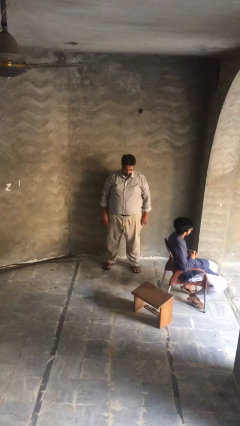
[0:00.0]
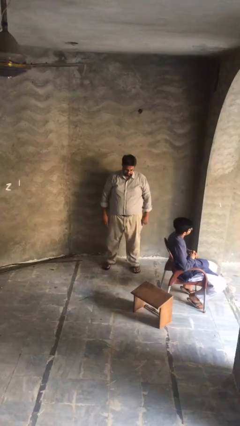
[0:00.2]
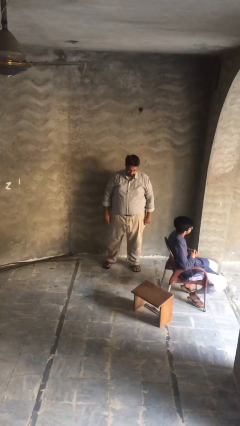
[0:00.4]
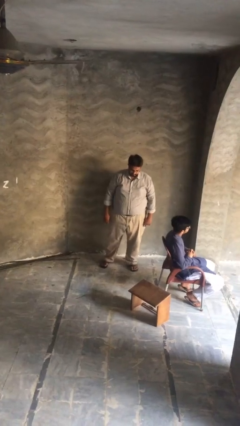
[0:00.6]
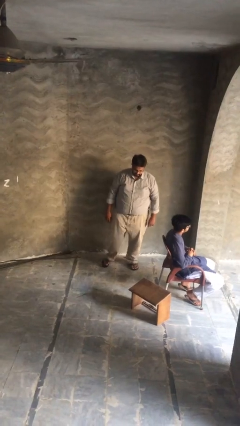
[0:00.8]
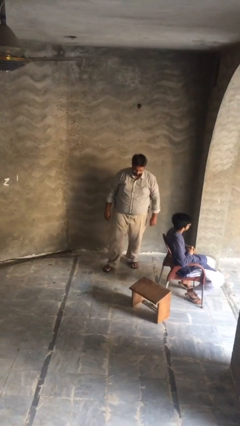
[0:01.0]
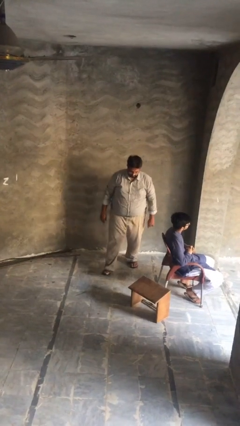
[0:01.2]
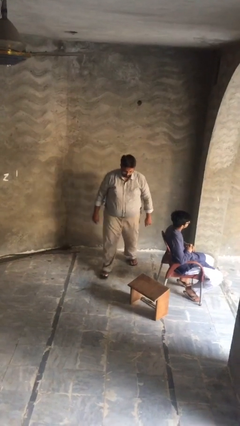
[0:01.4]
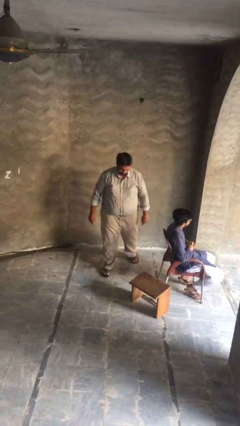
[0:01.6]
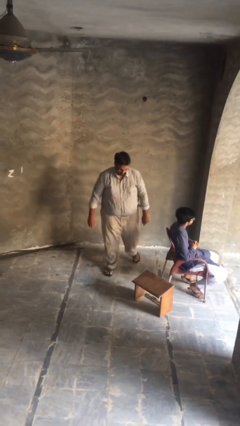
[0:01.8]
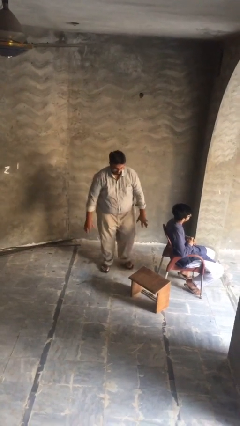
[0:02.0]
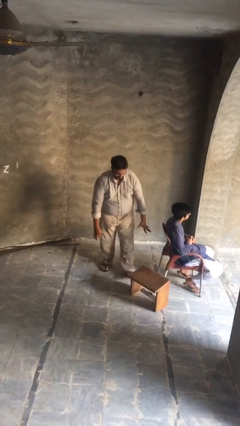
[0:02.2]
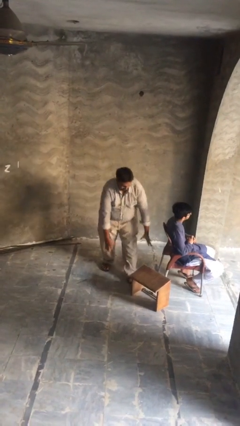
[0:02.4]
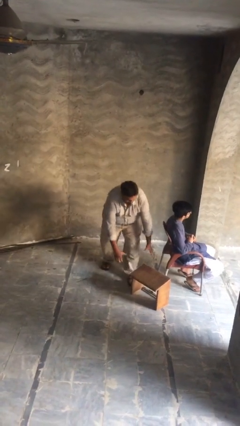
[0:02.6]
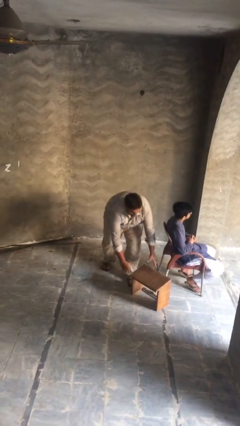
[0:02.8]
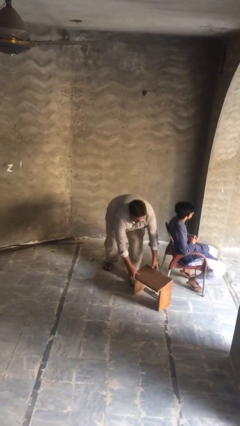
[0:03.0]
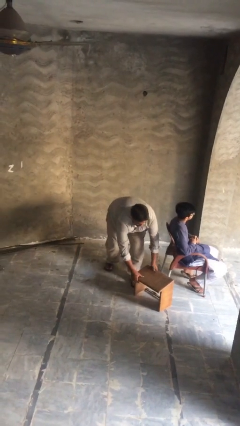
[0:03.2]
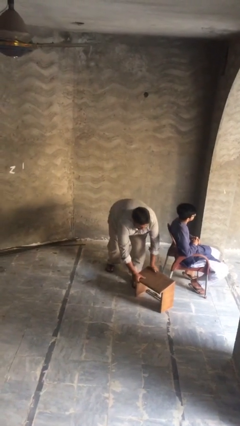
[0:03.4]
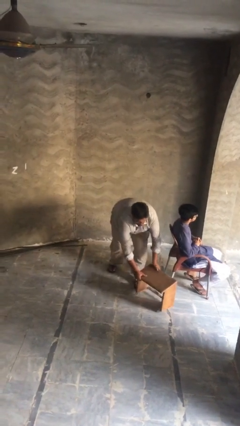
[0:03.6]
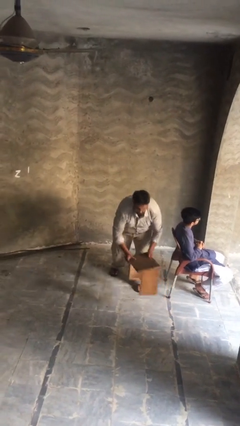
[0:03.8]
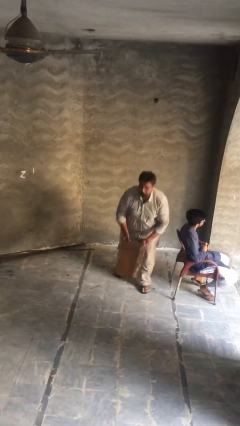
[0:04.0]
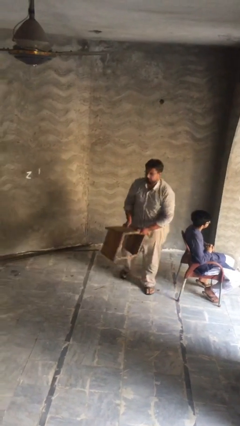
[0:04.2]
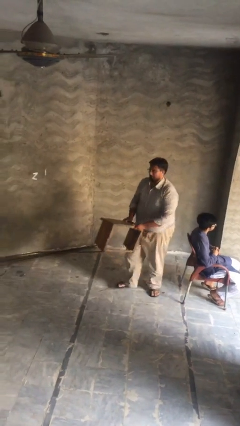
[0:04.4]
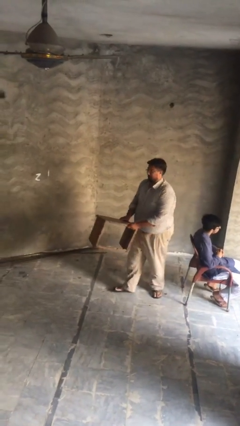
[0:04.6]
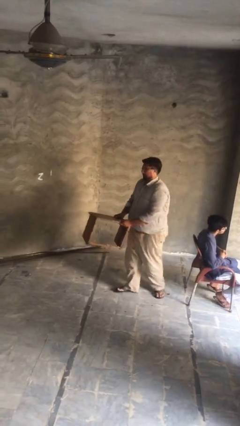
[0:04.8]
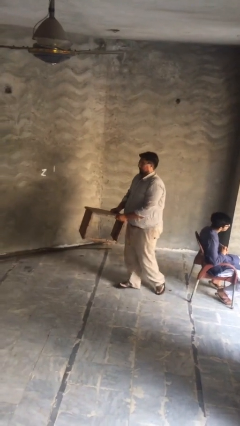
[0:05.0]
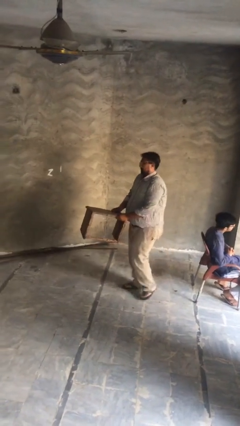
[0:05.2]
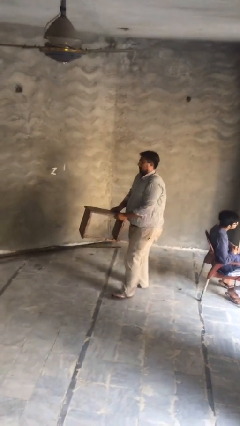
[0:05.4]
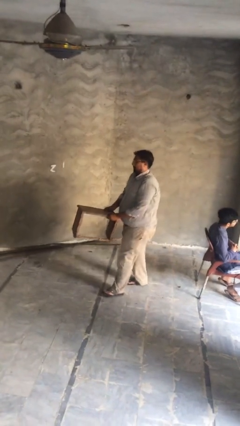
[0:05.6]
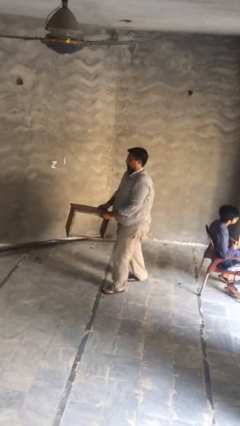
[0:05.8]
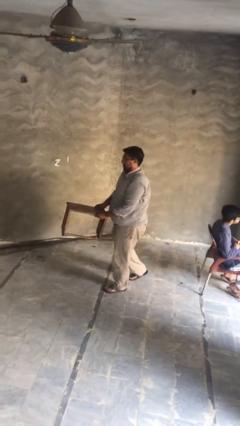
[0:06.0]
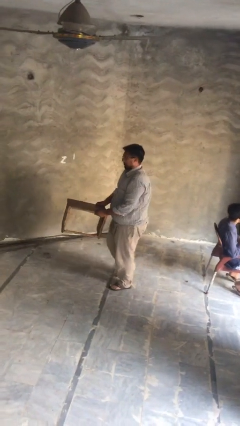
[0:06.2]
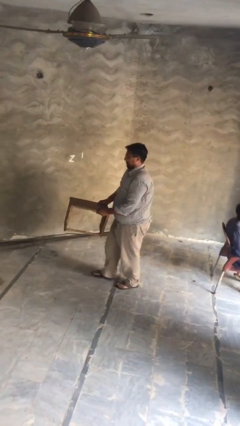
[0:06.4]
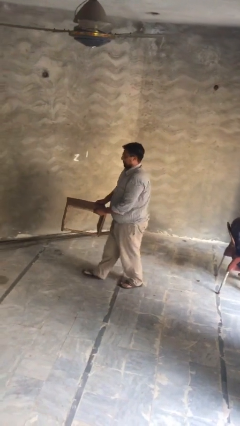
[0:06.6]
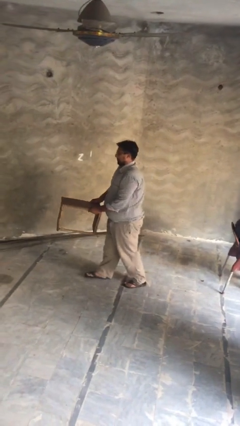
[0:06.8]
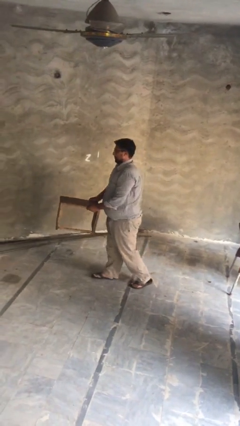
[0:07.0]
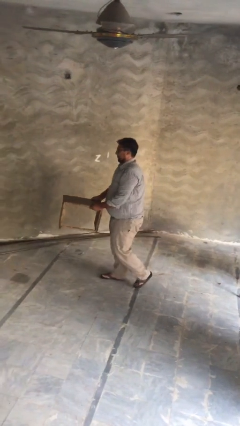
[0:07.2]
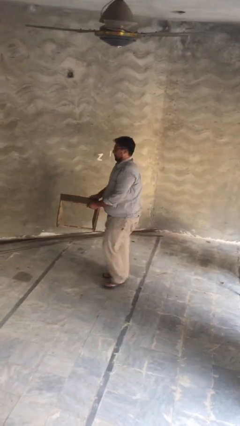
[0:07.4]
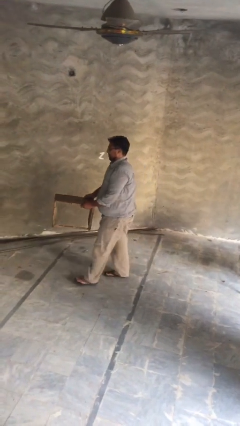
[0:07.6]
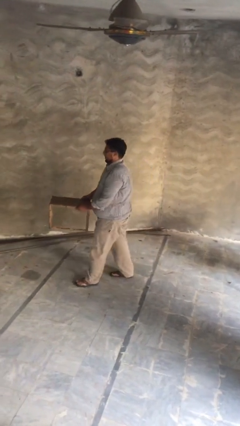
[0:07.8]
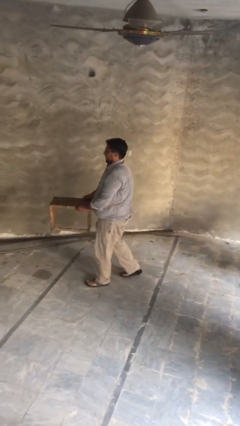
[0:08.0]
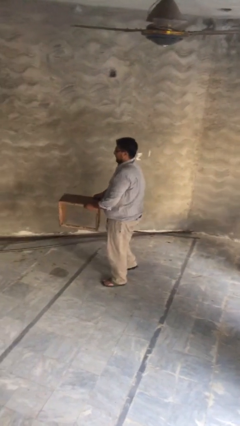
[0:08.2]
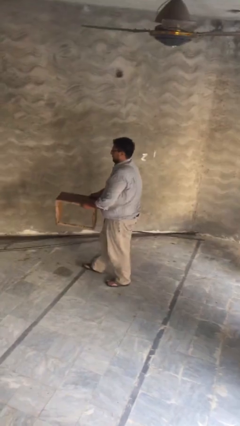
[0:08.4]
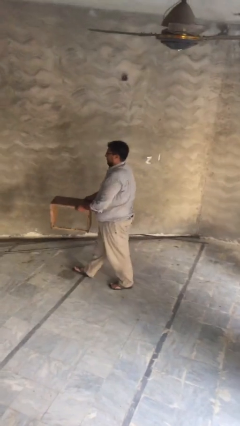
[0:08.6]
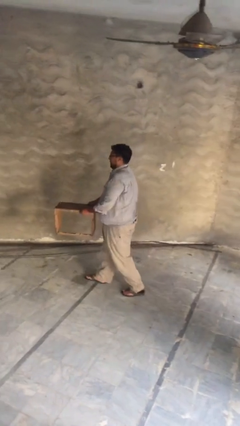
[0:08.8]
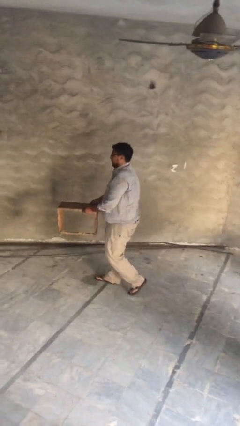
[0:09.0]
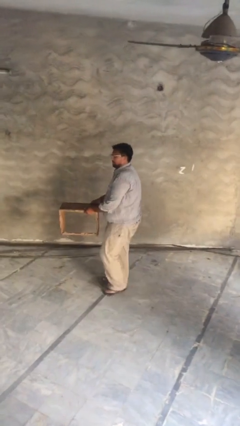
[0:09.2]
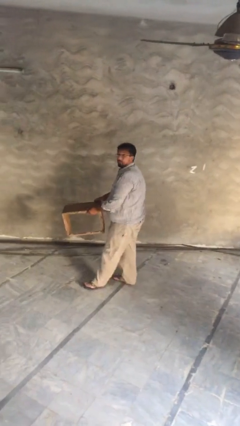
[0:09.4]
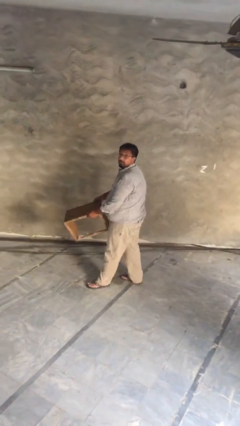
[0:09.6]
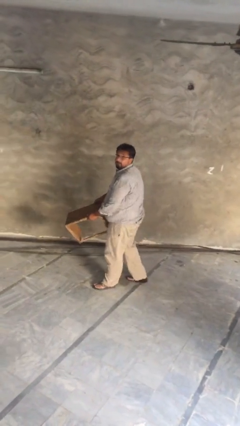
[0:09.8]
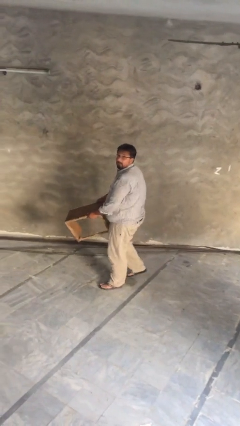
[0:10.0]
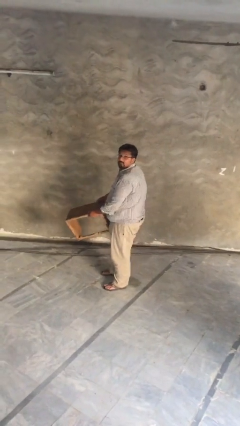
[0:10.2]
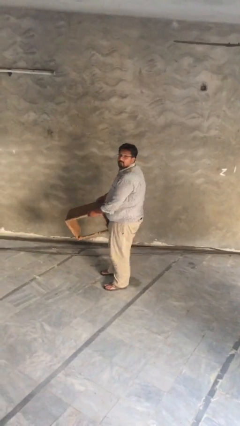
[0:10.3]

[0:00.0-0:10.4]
person steals object from person

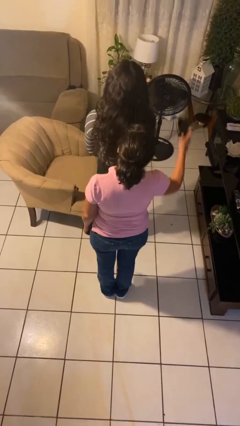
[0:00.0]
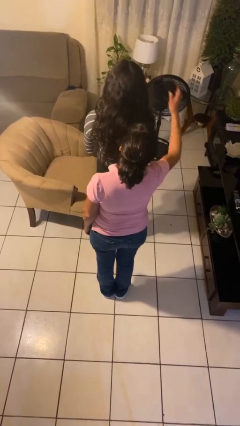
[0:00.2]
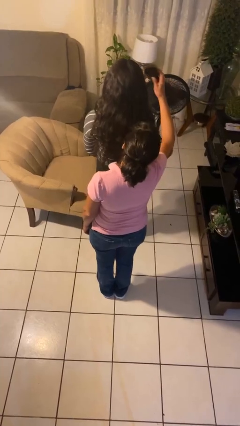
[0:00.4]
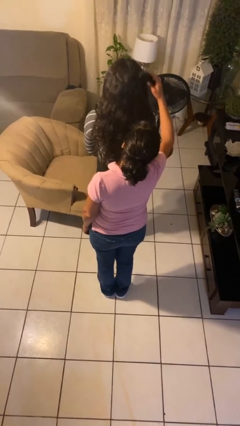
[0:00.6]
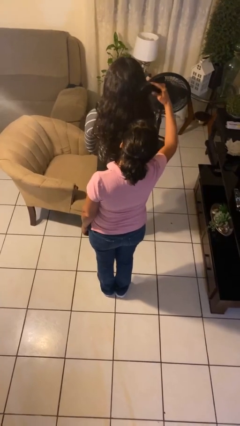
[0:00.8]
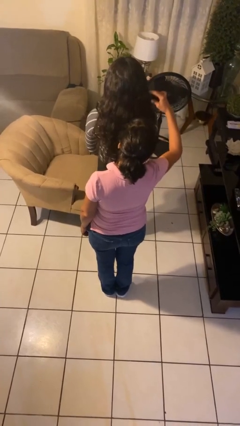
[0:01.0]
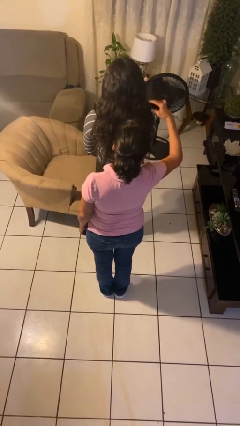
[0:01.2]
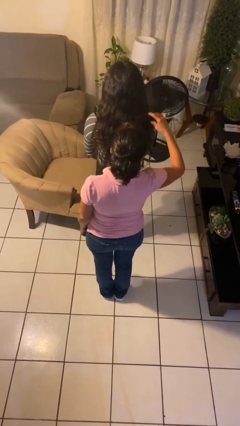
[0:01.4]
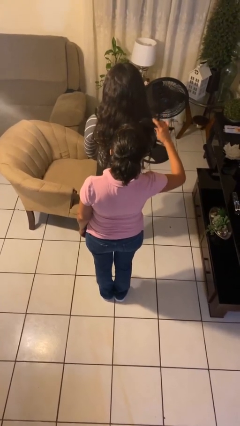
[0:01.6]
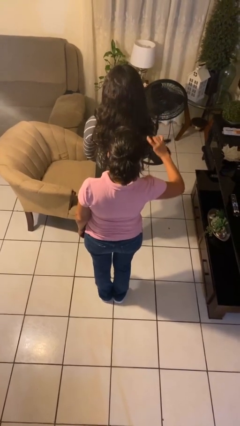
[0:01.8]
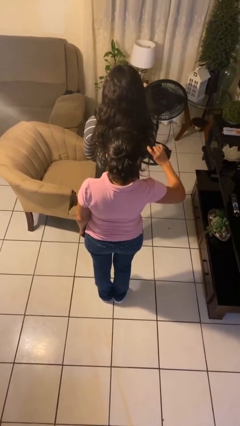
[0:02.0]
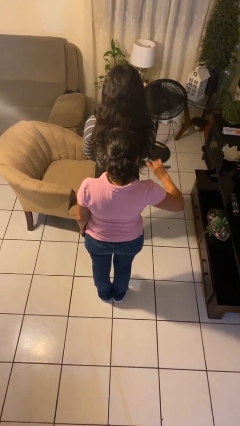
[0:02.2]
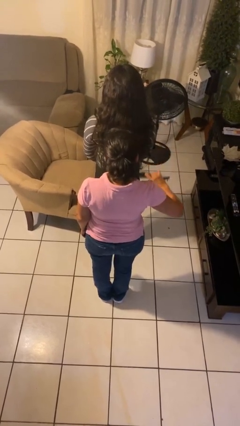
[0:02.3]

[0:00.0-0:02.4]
person brushes hair of person

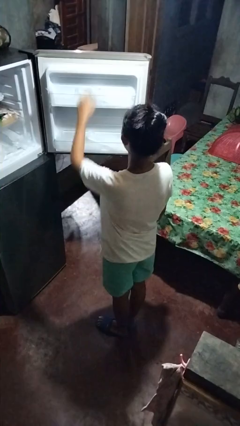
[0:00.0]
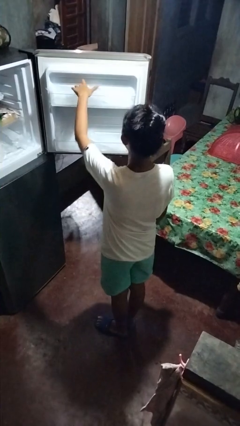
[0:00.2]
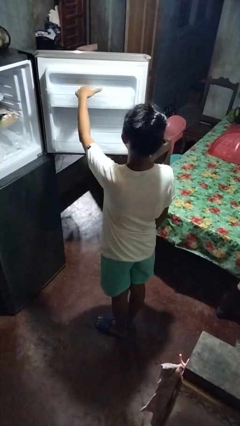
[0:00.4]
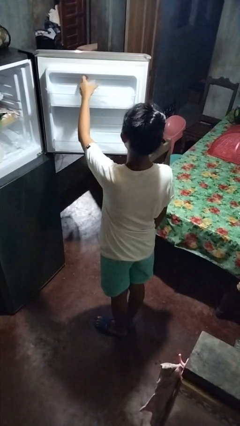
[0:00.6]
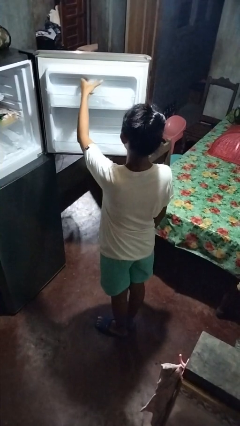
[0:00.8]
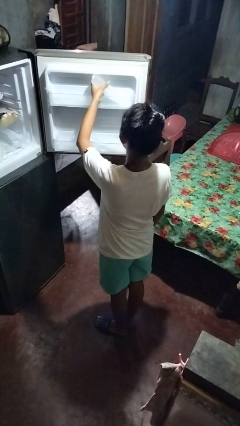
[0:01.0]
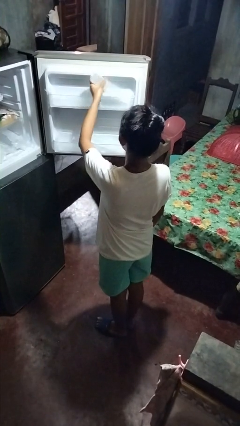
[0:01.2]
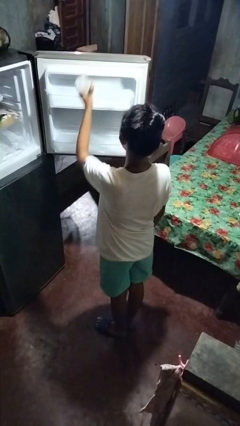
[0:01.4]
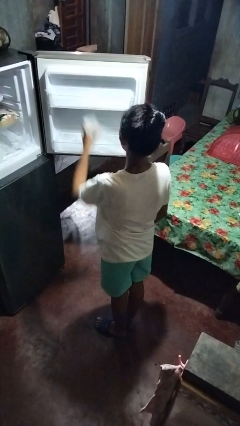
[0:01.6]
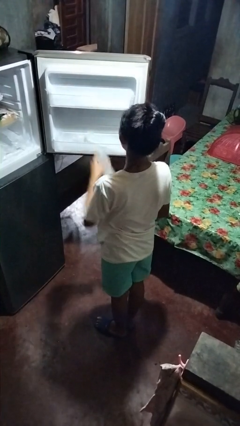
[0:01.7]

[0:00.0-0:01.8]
person takes object from refrigerator

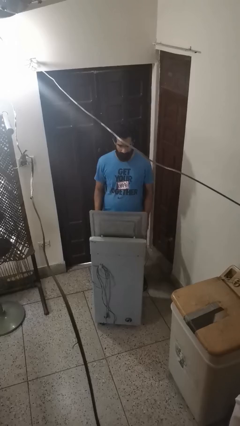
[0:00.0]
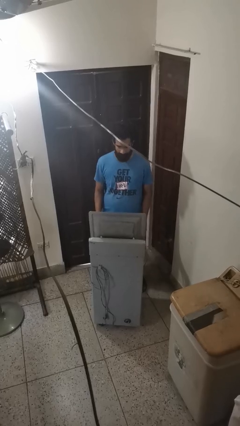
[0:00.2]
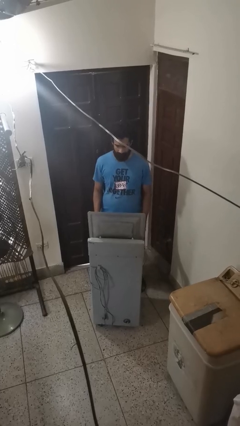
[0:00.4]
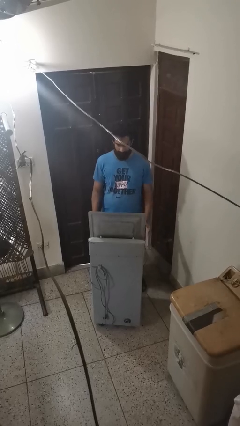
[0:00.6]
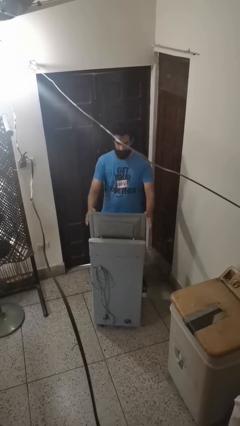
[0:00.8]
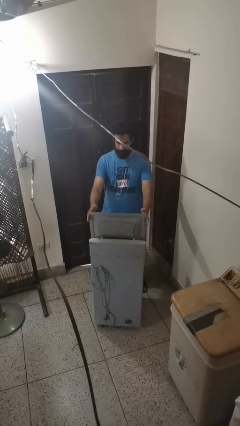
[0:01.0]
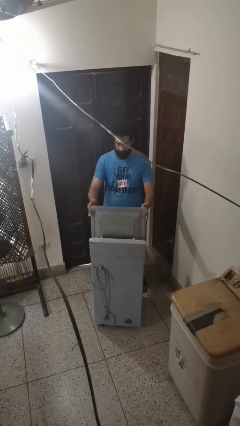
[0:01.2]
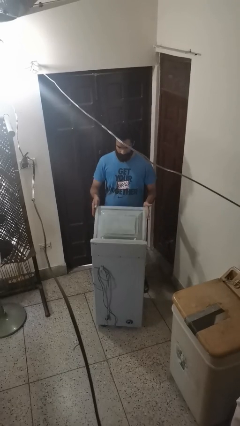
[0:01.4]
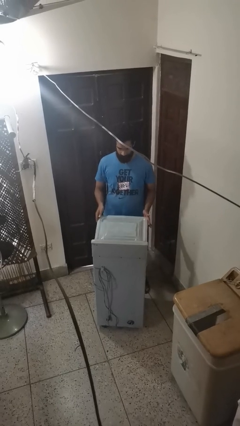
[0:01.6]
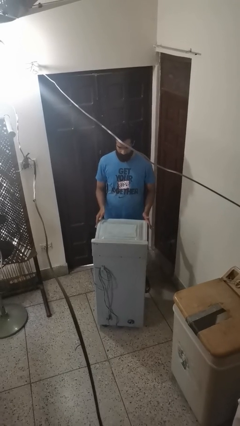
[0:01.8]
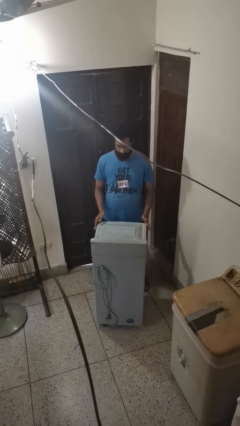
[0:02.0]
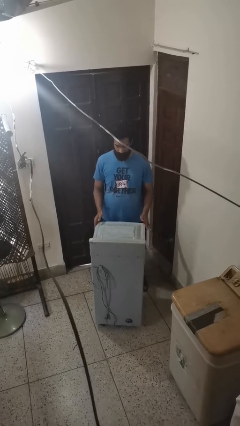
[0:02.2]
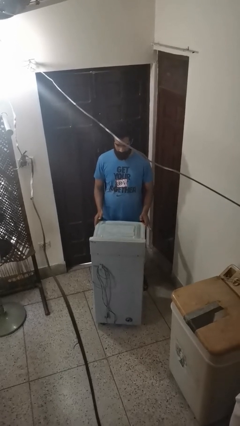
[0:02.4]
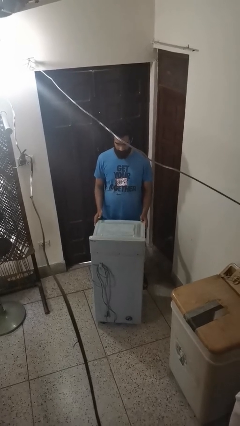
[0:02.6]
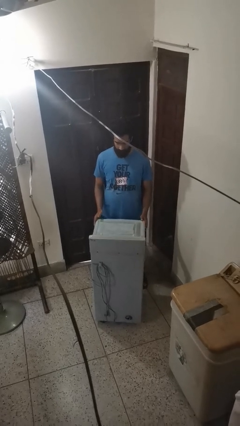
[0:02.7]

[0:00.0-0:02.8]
person closes clothes washer
